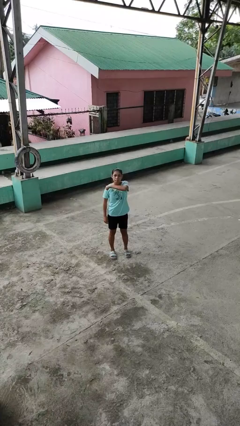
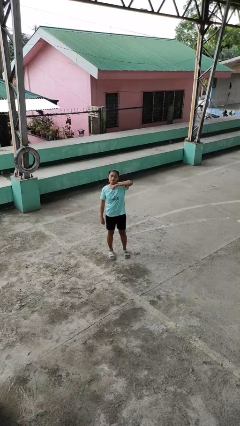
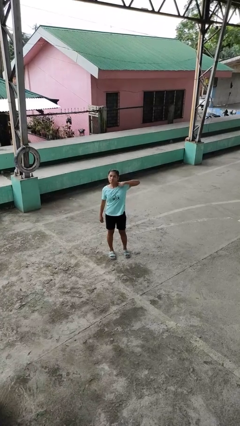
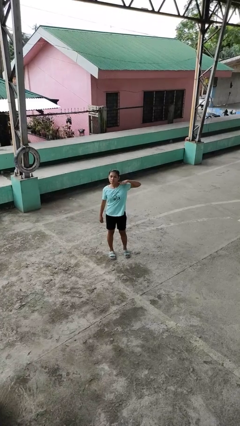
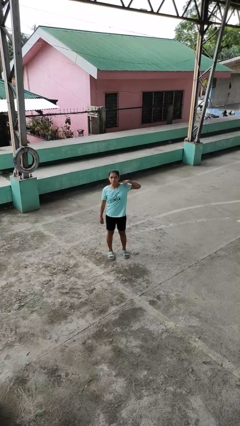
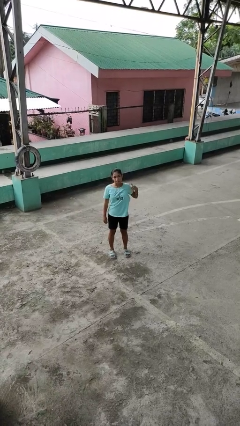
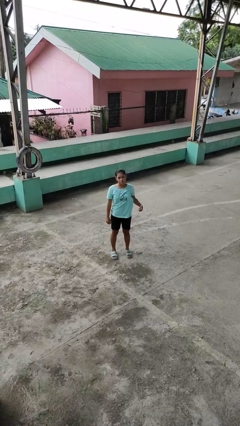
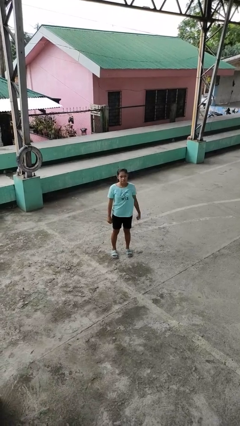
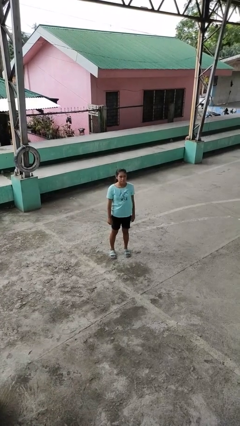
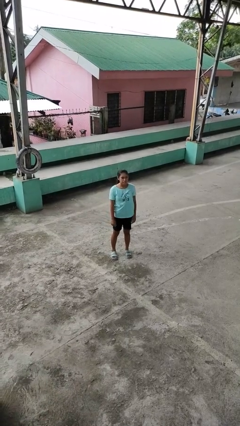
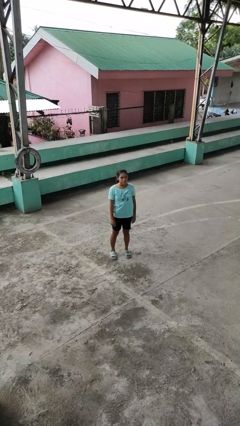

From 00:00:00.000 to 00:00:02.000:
person gestures cut

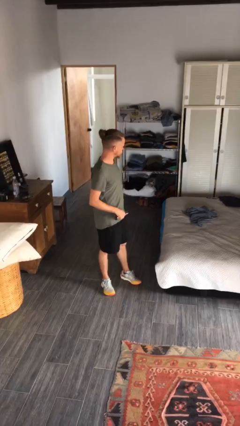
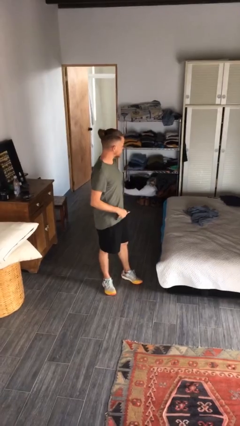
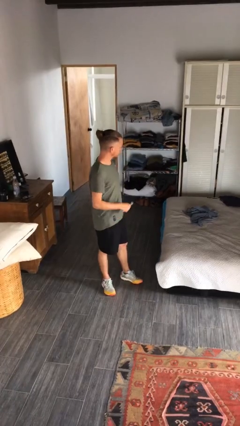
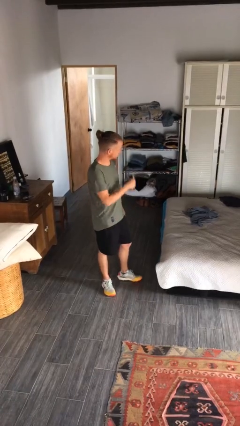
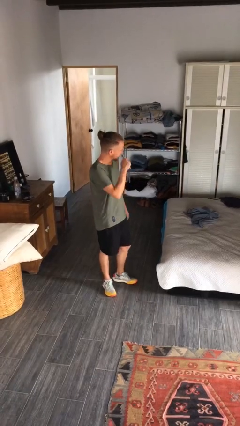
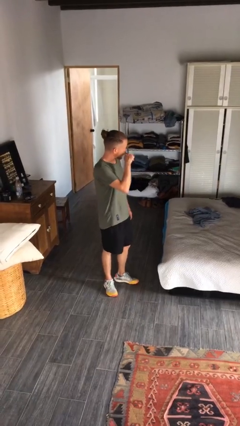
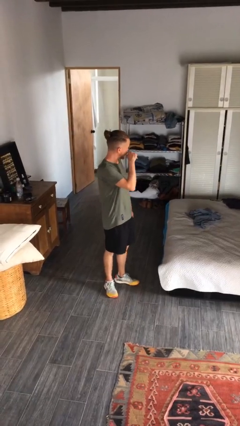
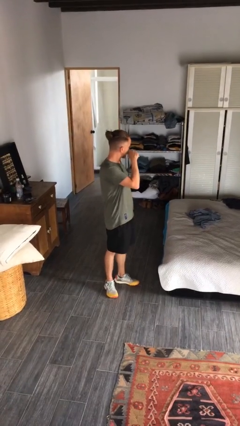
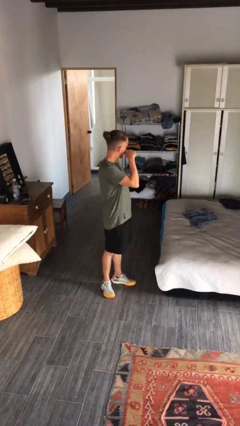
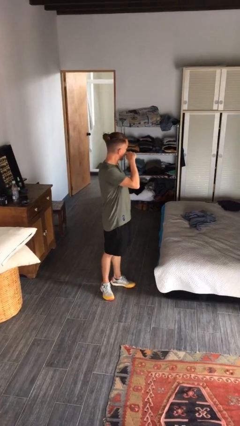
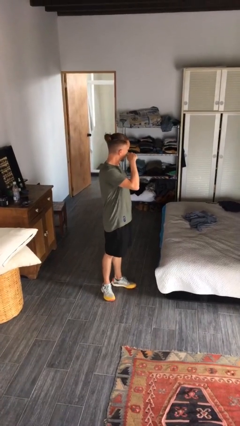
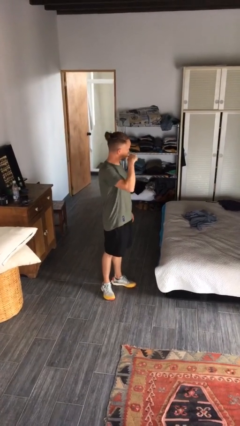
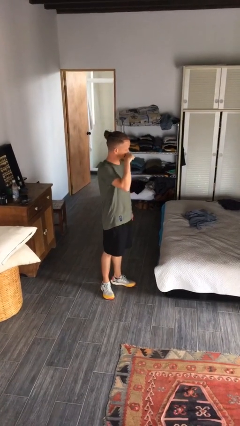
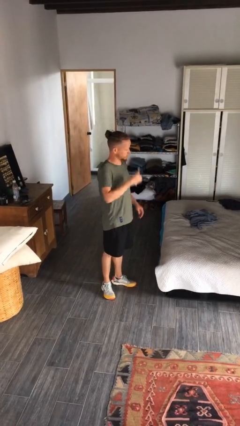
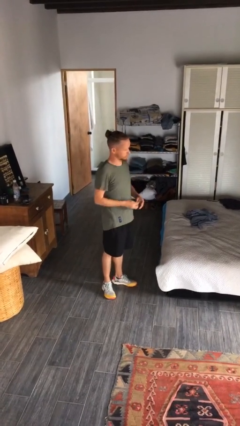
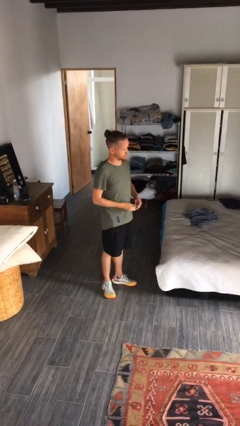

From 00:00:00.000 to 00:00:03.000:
person brushes teeth

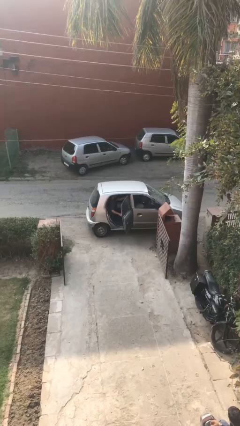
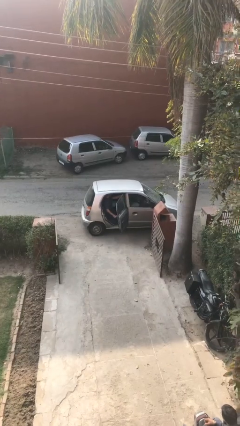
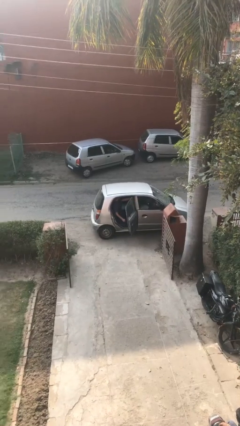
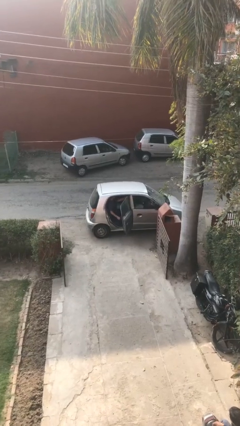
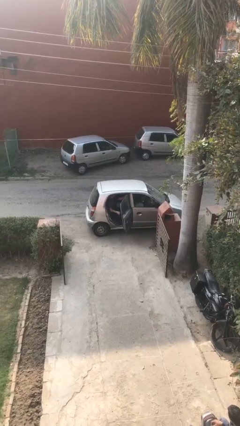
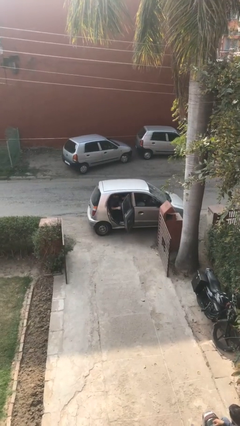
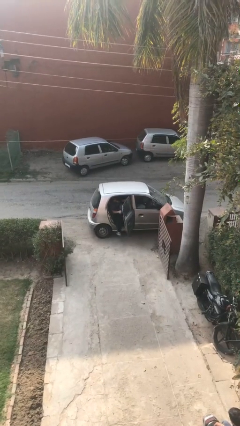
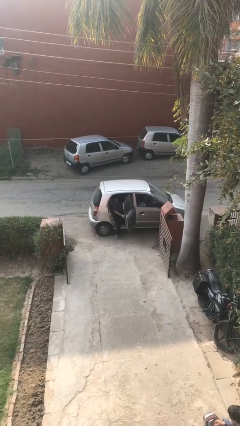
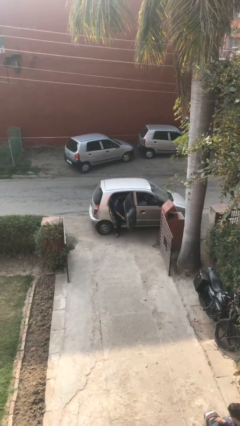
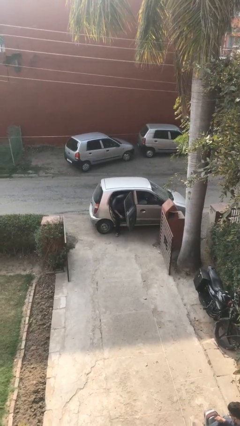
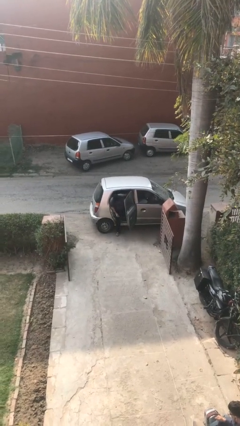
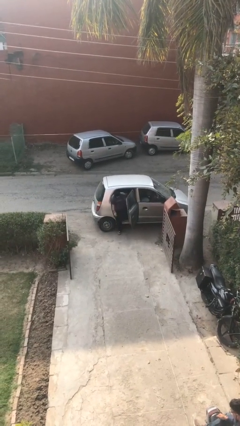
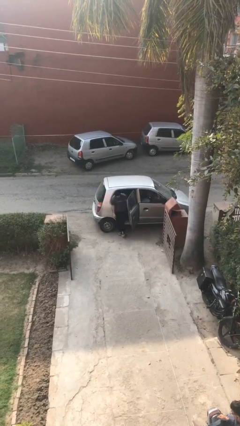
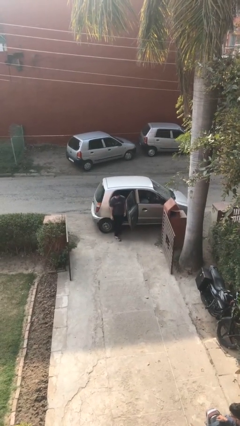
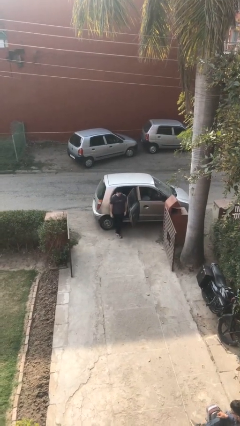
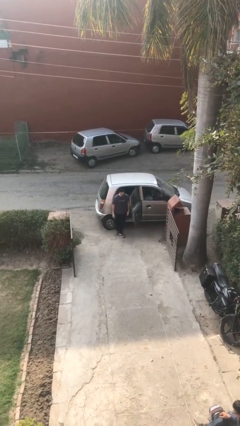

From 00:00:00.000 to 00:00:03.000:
person exits car

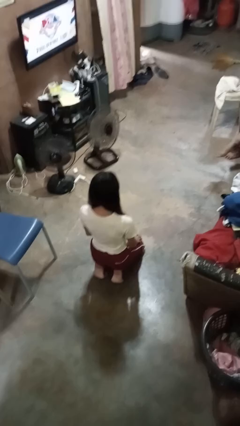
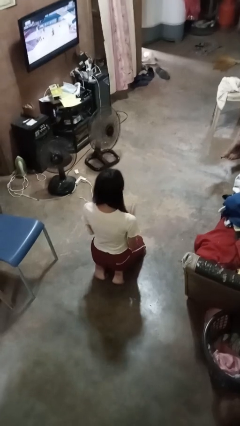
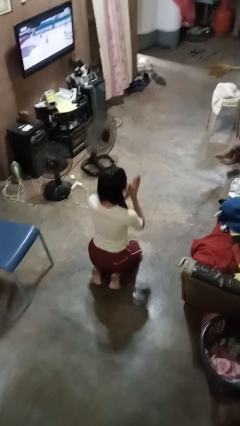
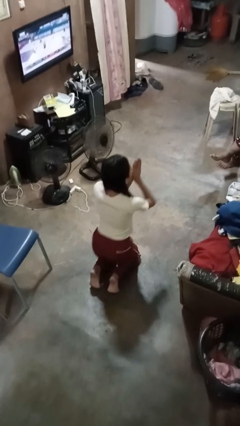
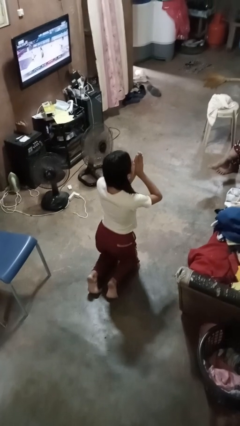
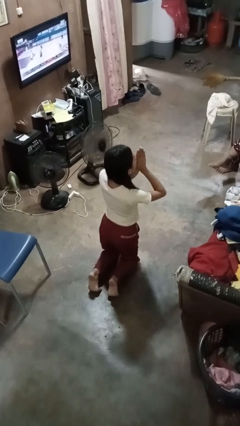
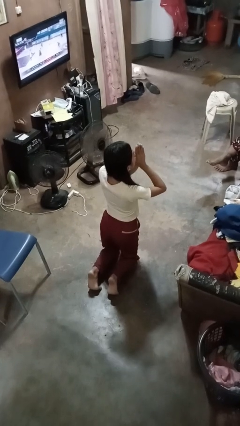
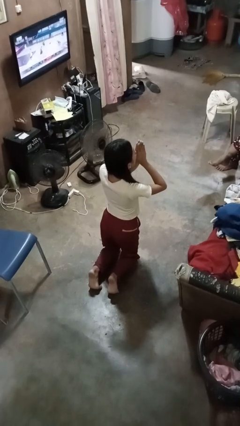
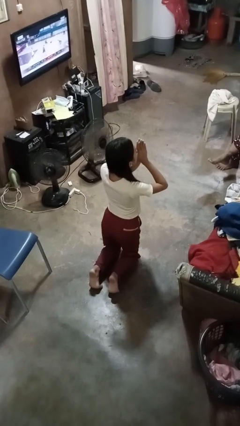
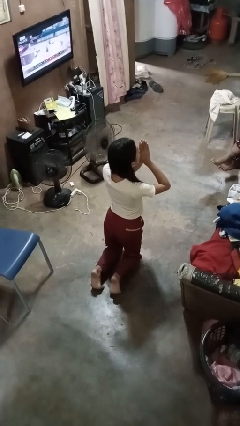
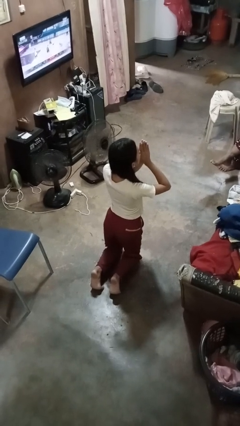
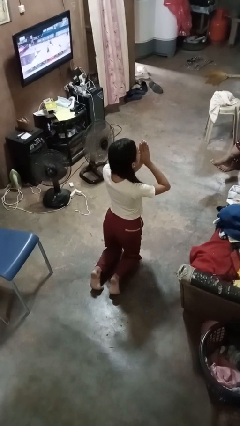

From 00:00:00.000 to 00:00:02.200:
person prays

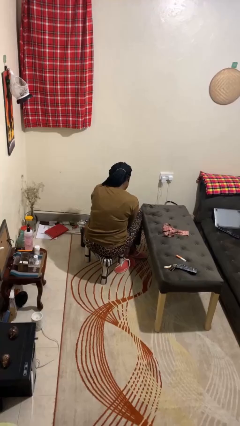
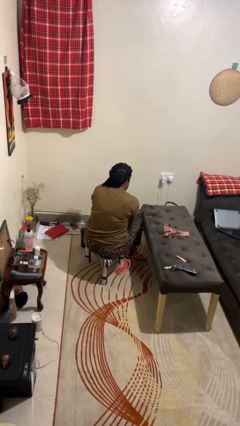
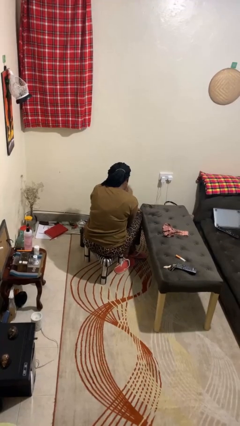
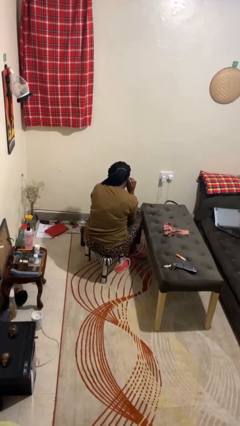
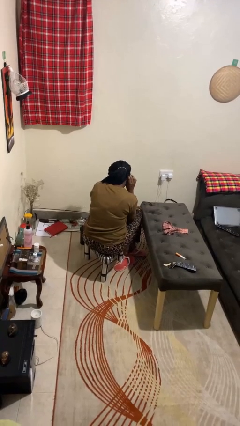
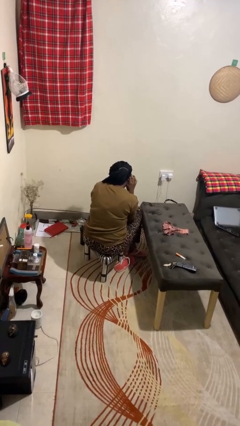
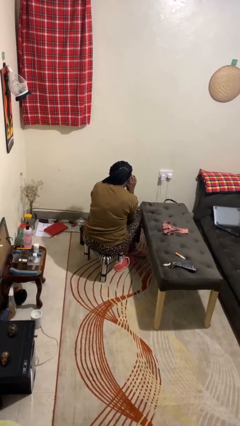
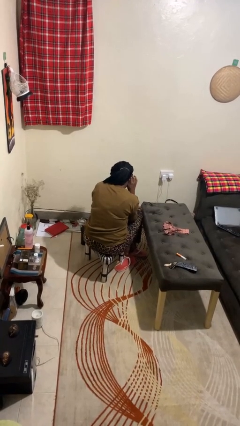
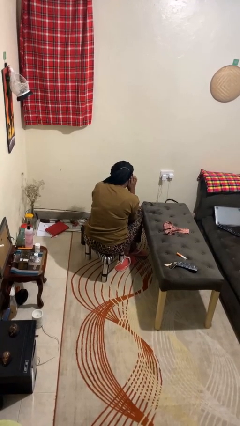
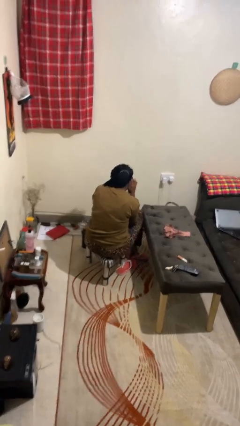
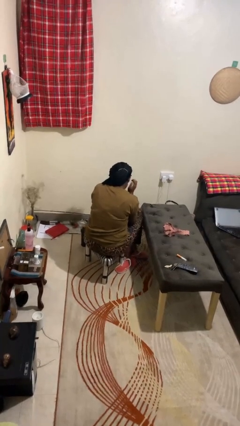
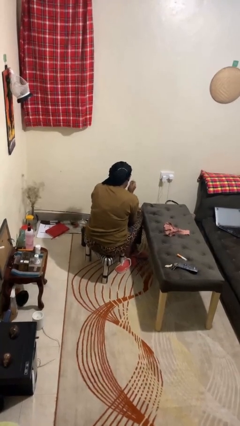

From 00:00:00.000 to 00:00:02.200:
person gestures listen closely

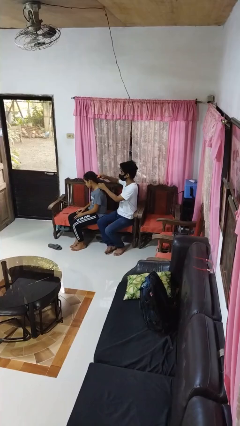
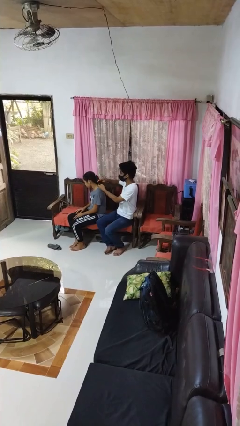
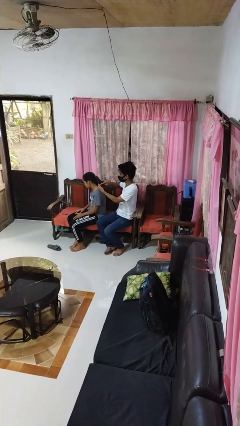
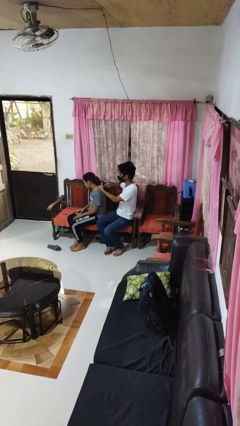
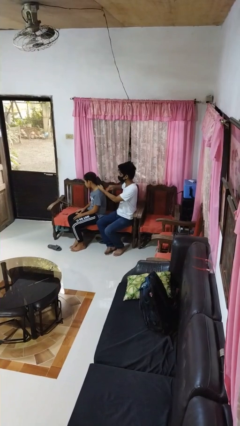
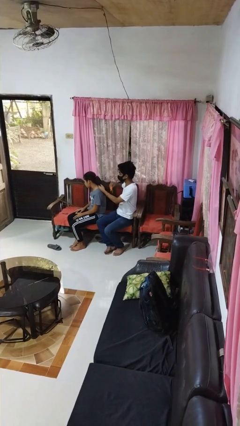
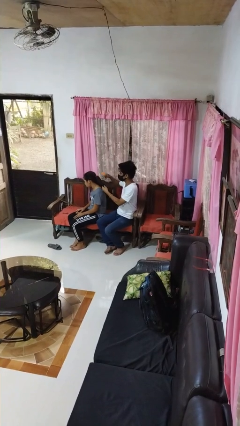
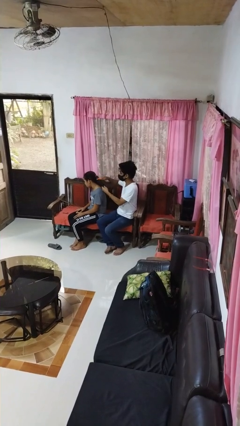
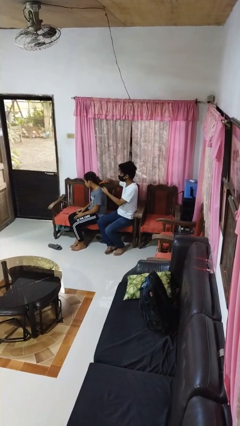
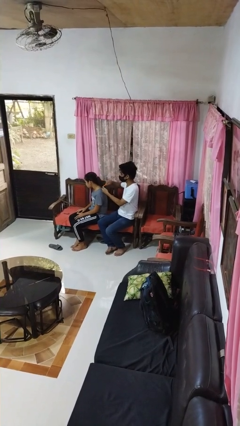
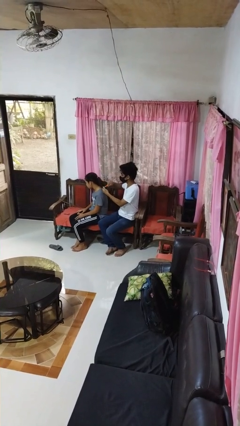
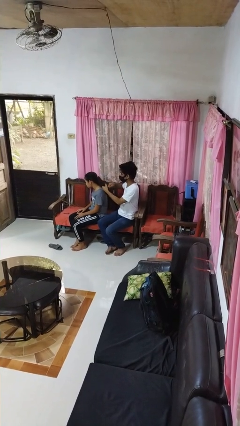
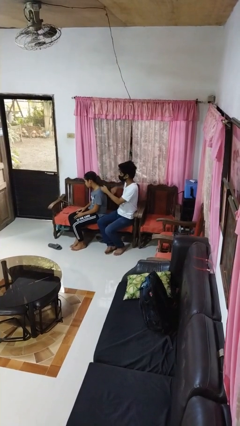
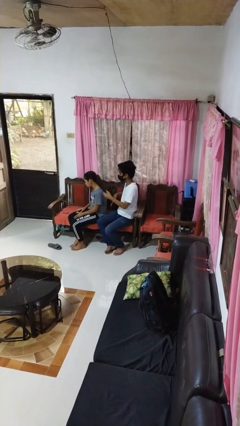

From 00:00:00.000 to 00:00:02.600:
person brushes hair of person

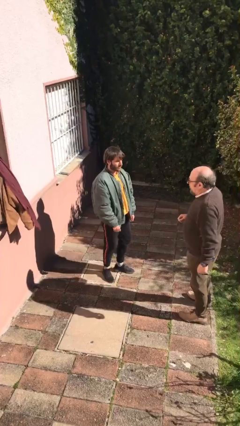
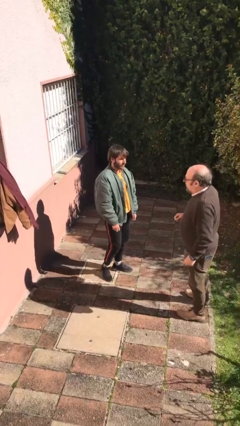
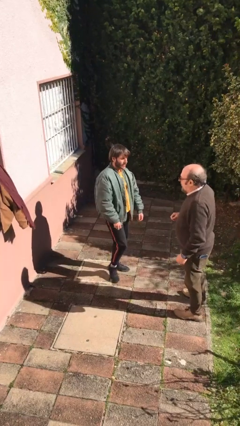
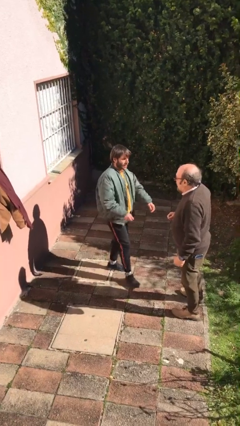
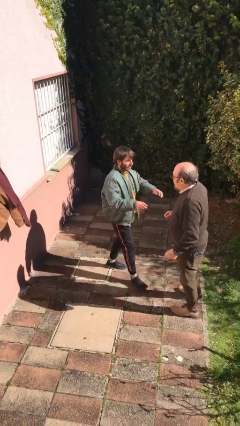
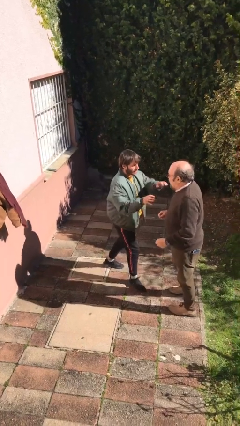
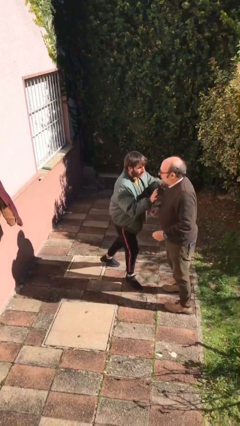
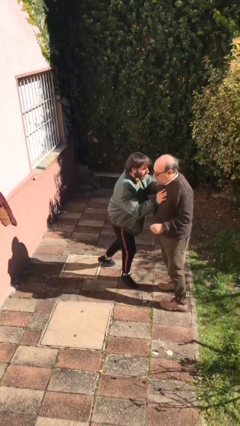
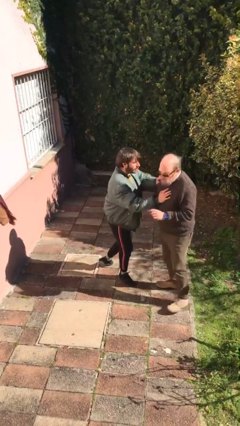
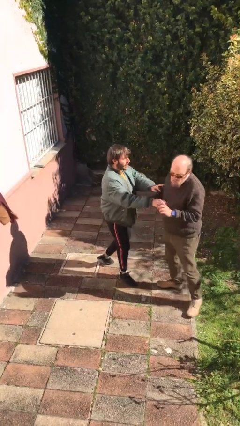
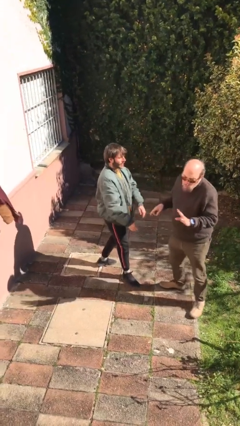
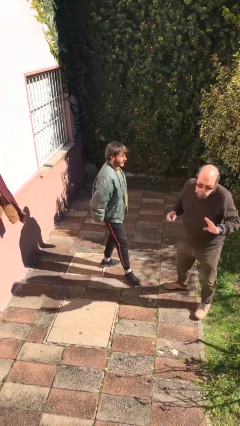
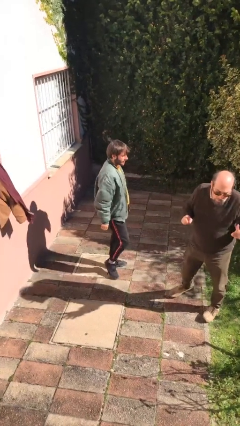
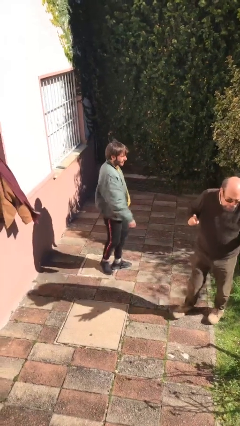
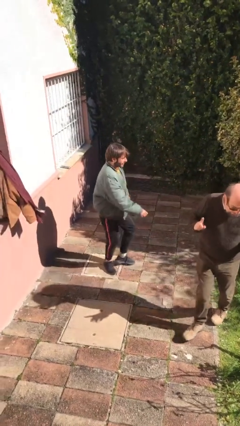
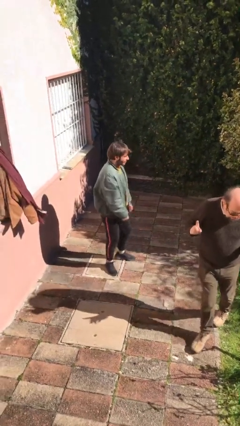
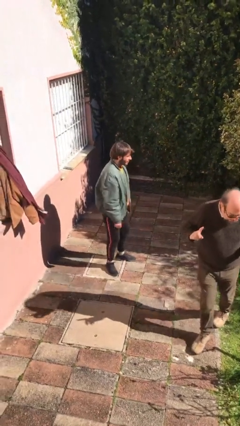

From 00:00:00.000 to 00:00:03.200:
person shoves person
